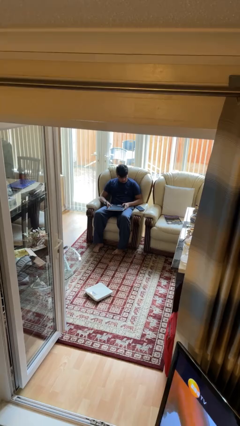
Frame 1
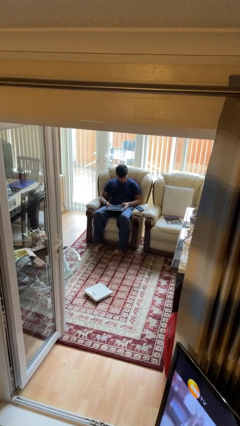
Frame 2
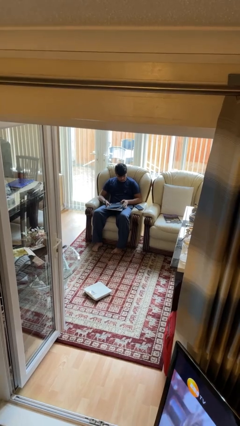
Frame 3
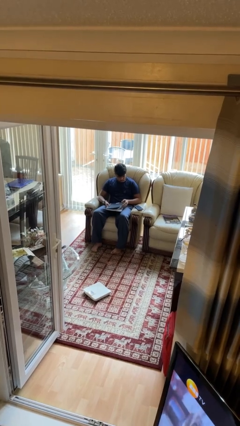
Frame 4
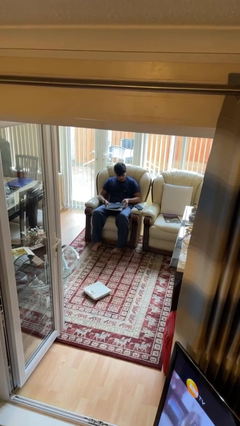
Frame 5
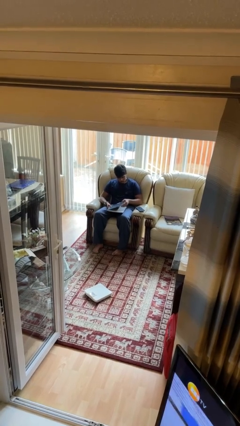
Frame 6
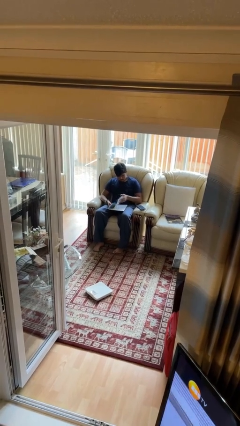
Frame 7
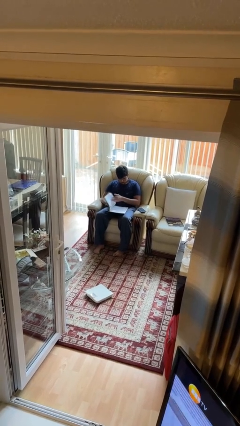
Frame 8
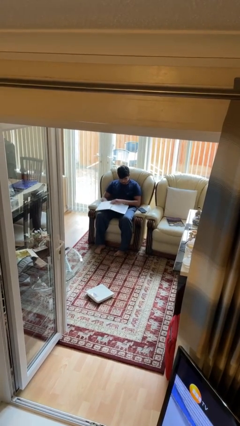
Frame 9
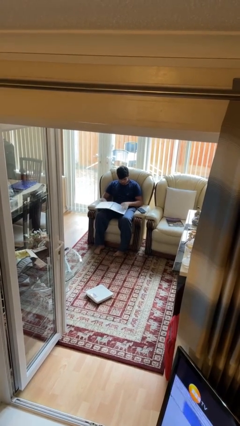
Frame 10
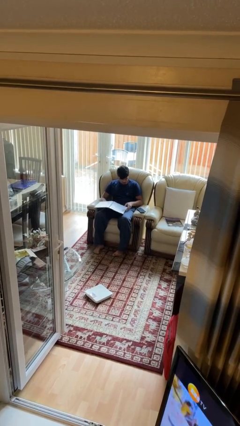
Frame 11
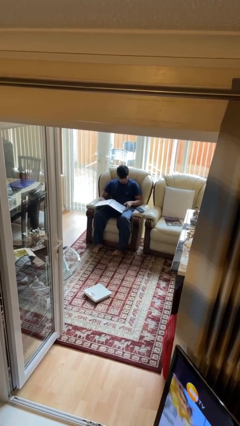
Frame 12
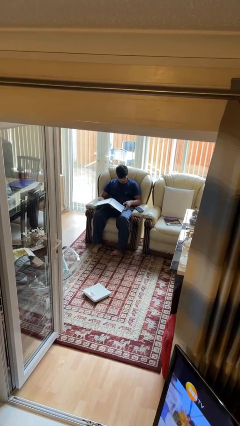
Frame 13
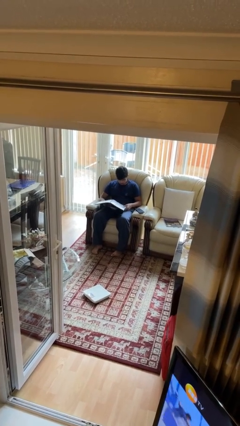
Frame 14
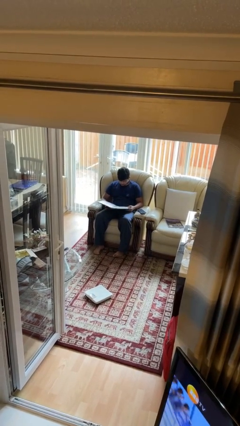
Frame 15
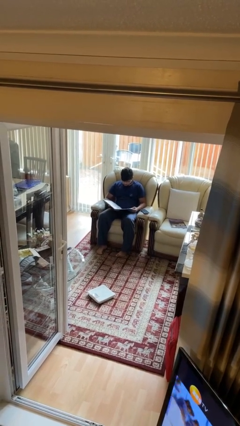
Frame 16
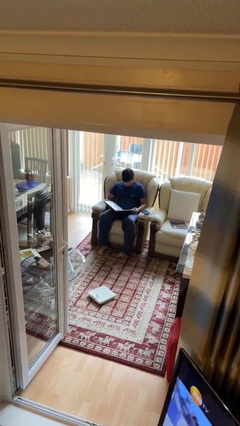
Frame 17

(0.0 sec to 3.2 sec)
person reads book

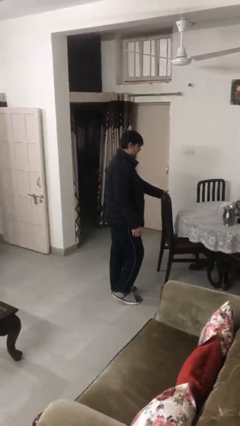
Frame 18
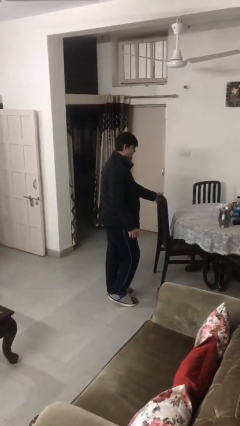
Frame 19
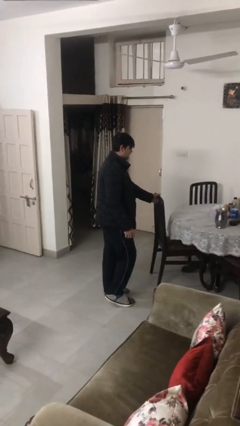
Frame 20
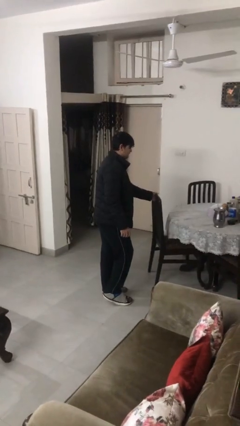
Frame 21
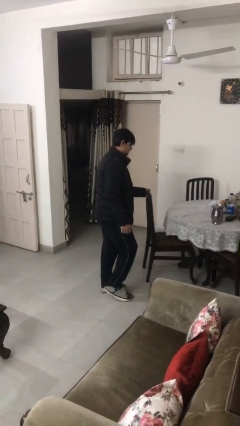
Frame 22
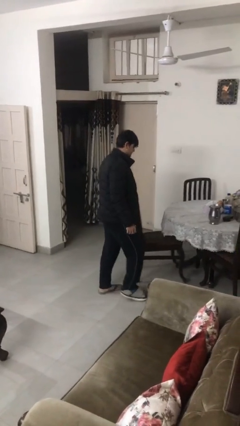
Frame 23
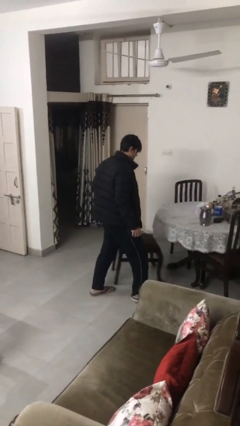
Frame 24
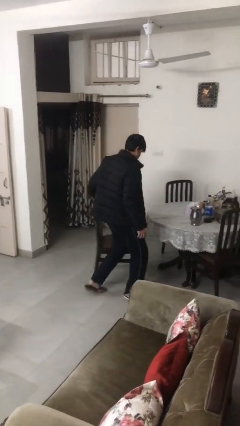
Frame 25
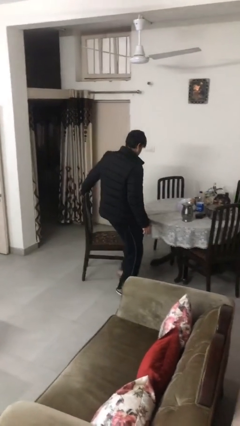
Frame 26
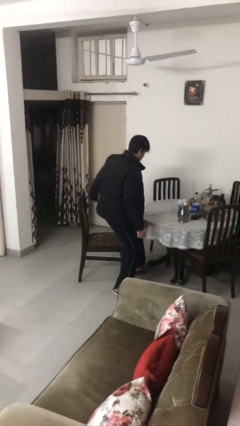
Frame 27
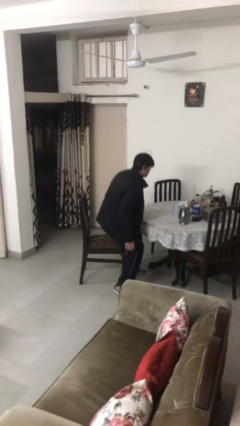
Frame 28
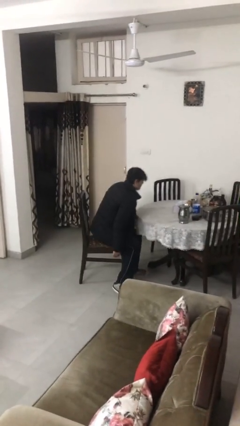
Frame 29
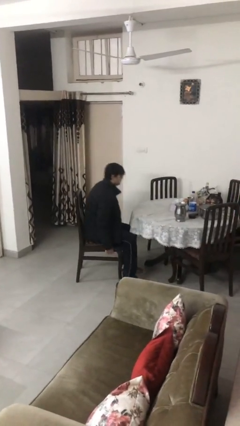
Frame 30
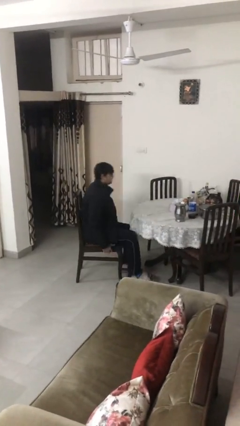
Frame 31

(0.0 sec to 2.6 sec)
person sits down

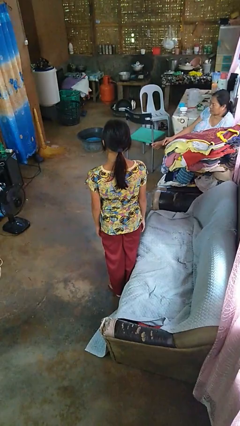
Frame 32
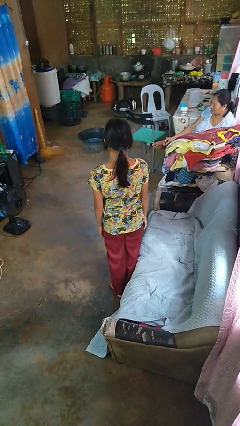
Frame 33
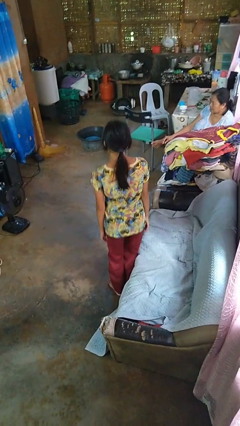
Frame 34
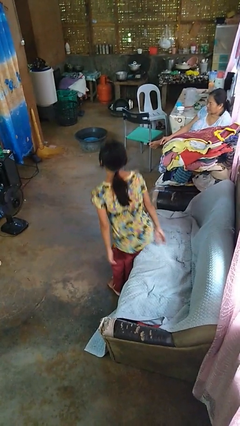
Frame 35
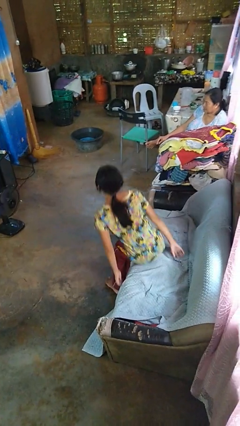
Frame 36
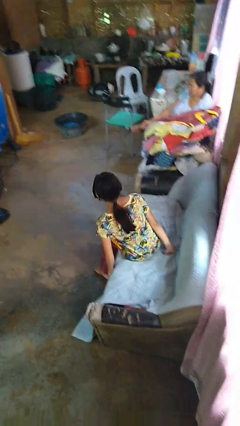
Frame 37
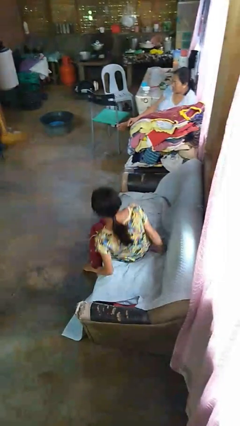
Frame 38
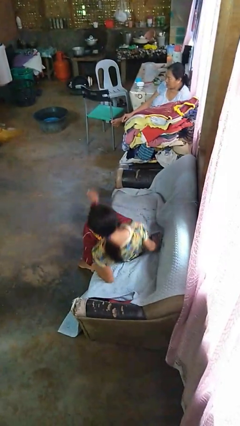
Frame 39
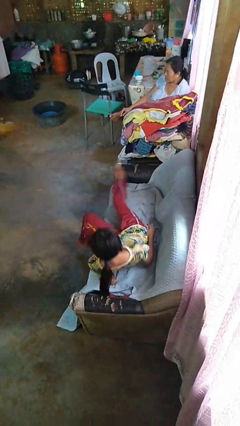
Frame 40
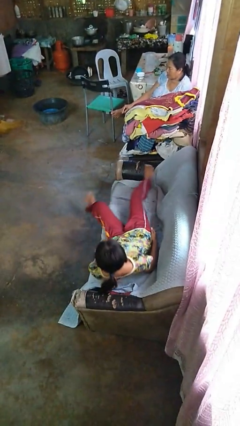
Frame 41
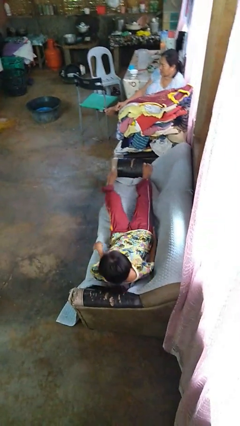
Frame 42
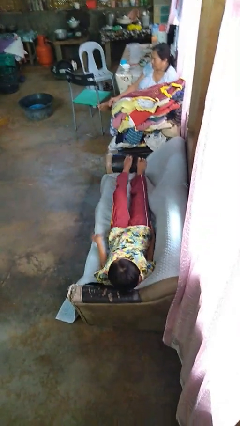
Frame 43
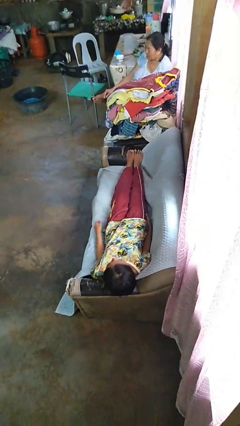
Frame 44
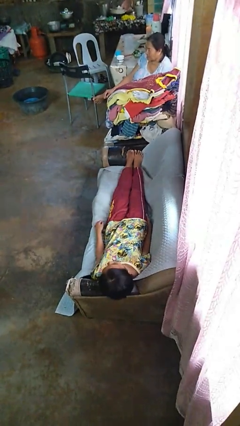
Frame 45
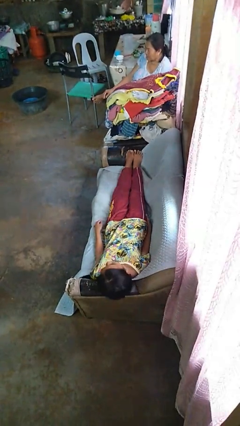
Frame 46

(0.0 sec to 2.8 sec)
person lies down on couch

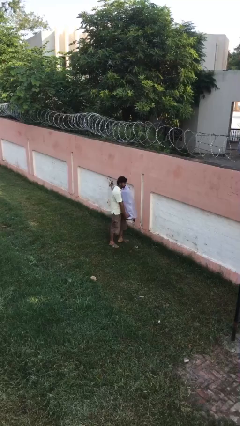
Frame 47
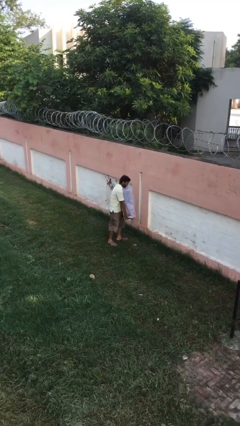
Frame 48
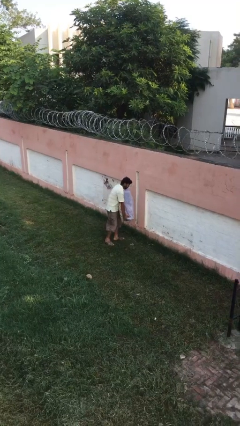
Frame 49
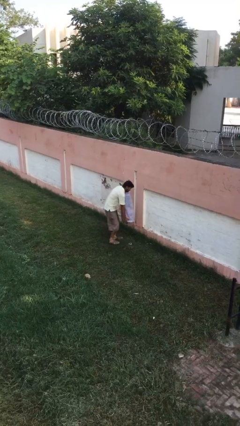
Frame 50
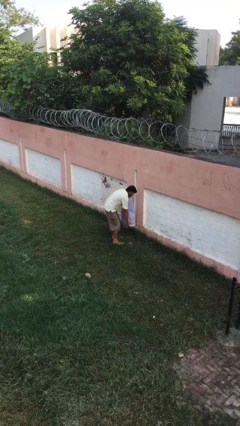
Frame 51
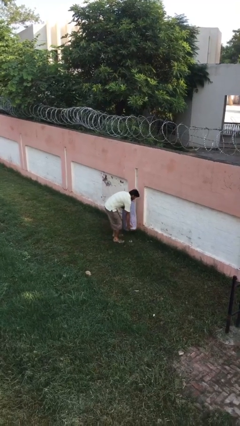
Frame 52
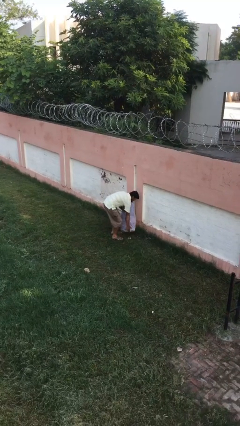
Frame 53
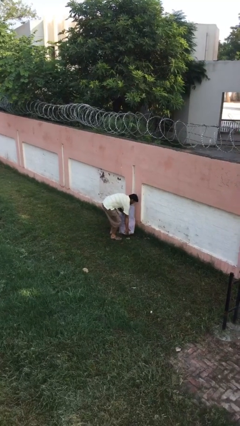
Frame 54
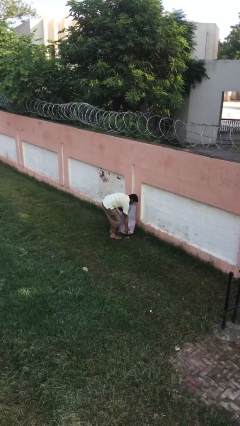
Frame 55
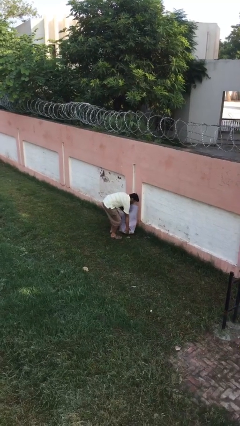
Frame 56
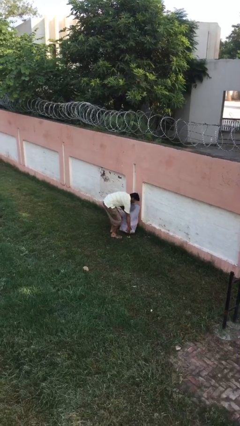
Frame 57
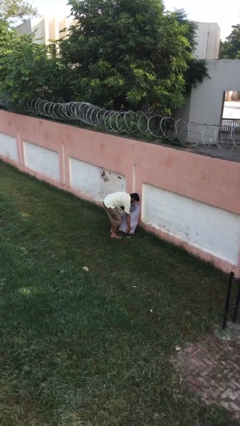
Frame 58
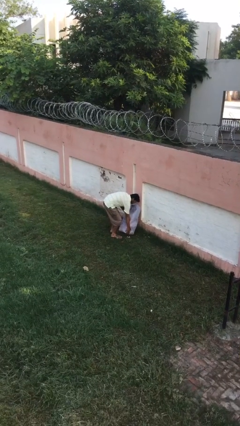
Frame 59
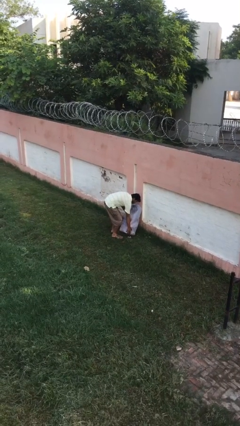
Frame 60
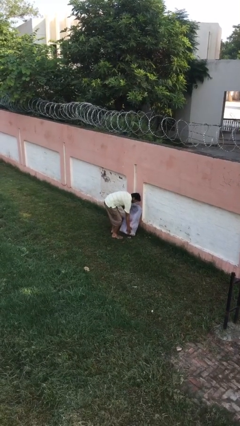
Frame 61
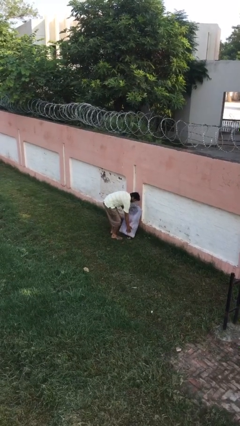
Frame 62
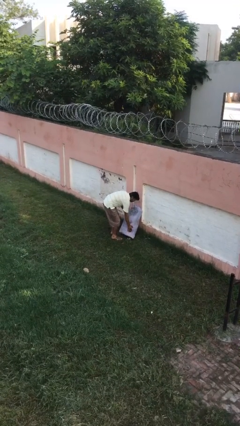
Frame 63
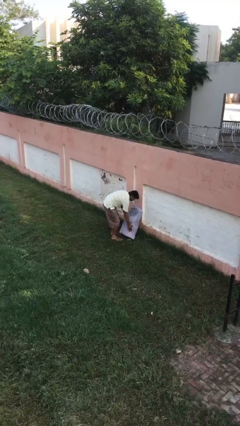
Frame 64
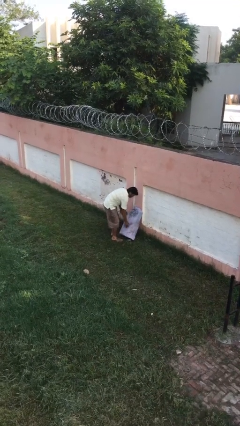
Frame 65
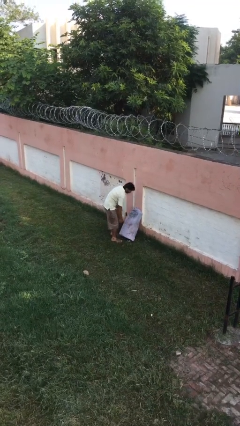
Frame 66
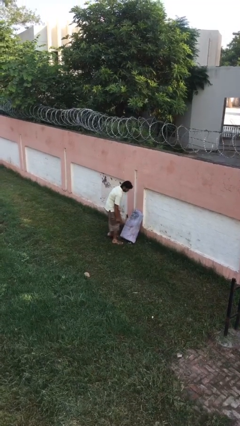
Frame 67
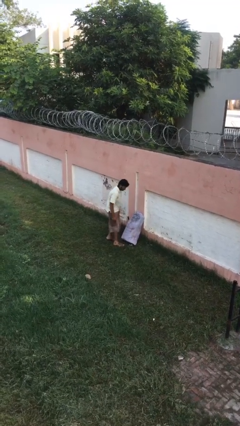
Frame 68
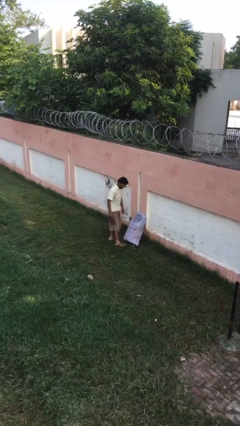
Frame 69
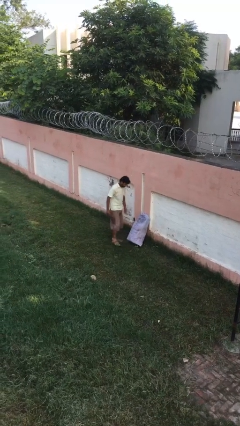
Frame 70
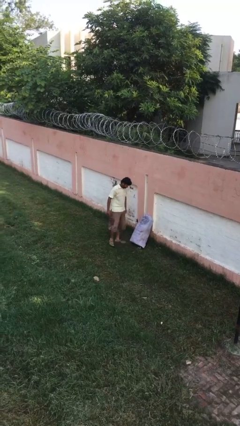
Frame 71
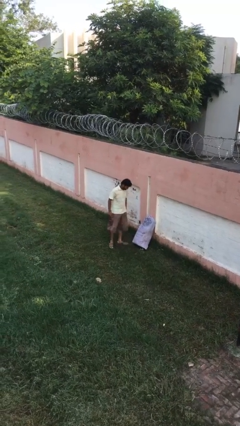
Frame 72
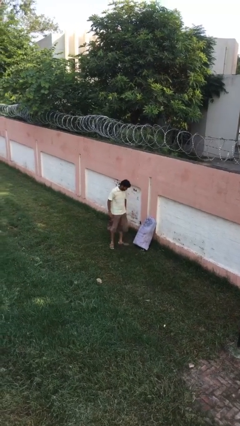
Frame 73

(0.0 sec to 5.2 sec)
person puts down object on floor

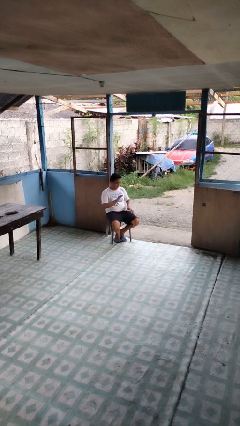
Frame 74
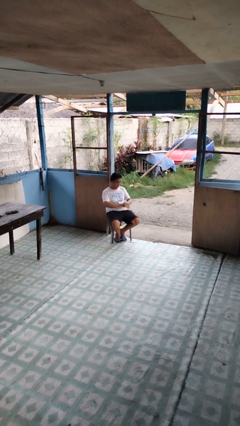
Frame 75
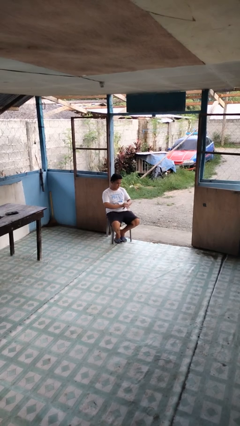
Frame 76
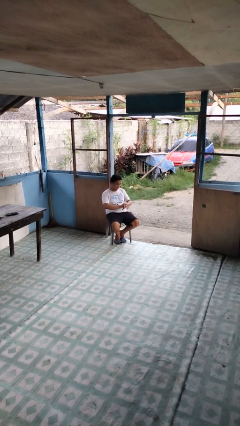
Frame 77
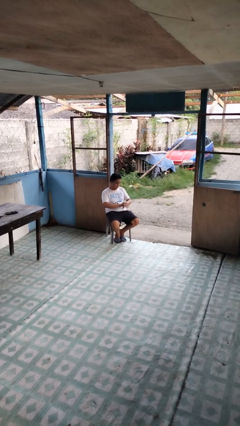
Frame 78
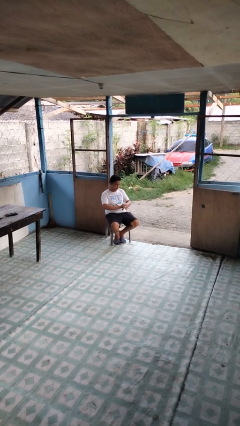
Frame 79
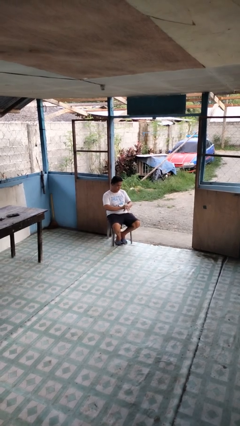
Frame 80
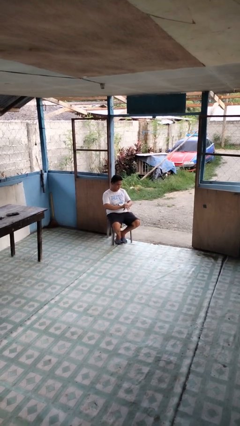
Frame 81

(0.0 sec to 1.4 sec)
person swats bug

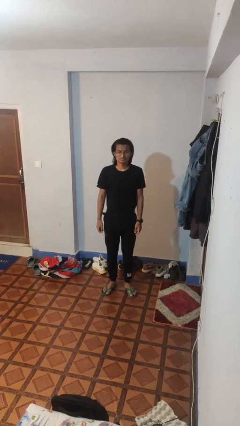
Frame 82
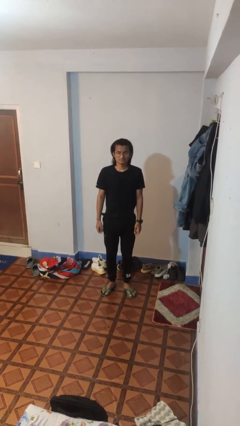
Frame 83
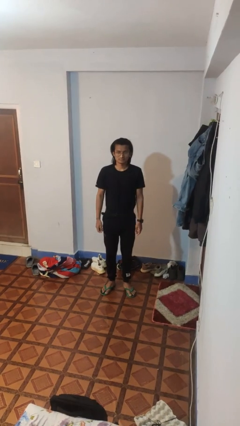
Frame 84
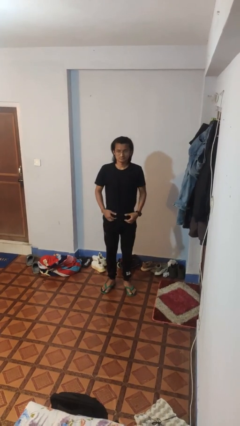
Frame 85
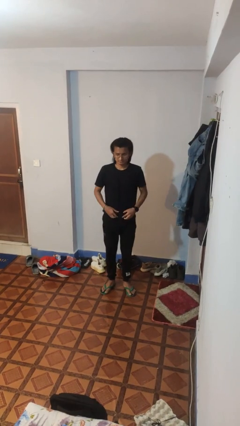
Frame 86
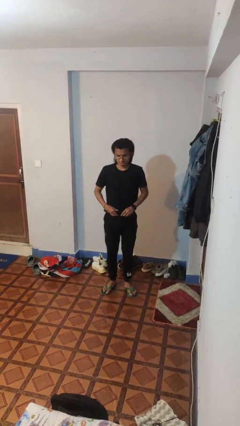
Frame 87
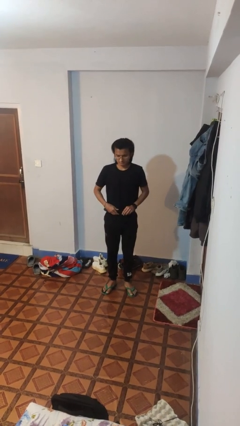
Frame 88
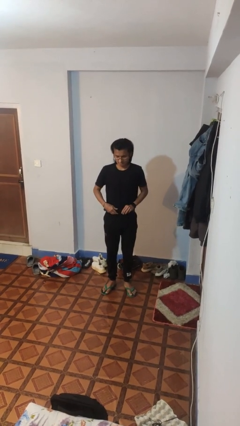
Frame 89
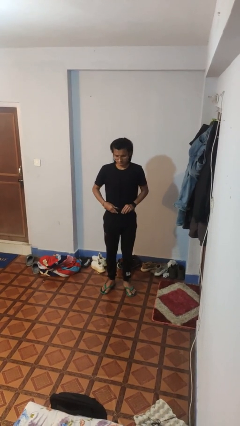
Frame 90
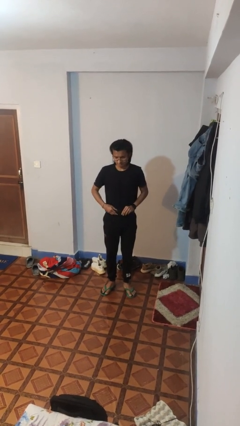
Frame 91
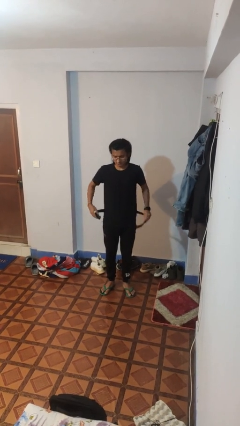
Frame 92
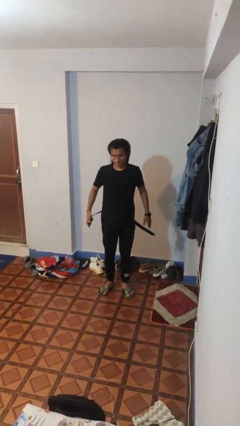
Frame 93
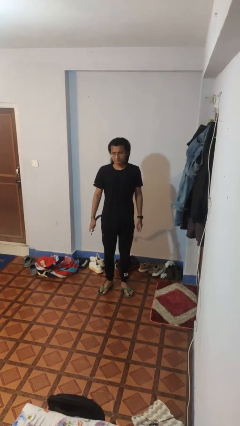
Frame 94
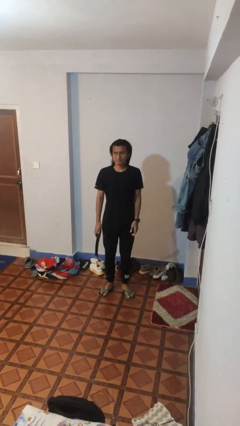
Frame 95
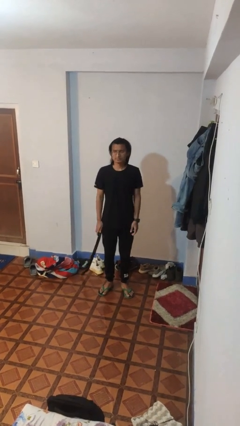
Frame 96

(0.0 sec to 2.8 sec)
person takes off belt
